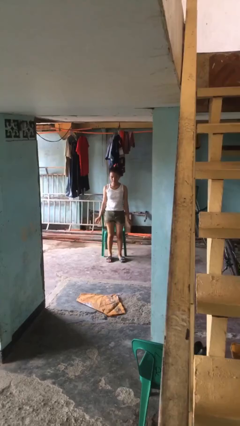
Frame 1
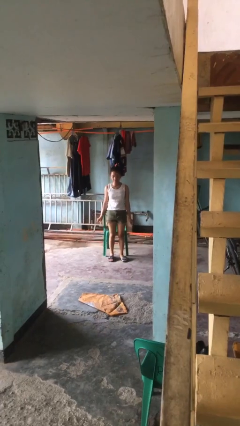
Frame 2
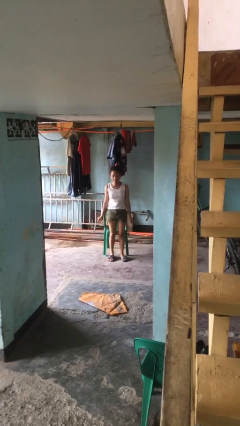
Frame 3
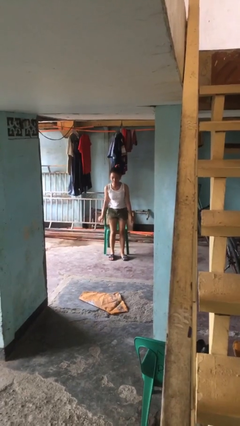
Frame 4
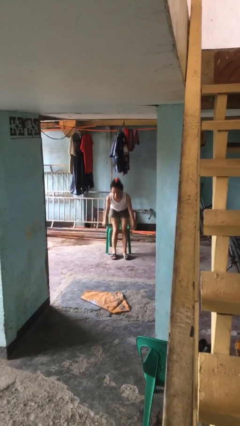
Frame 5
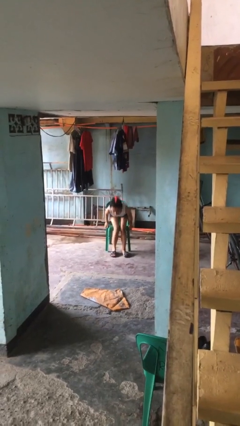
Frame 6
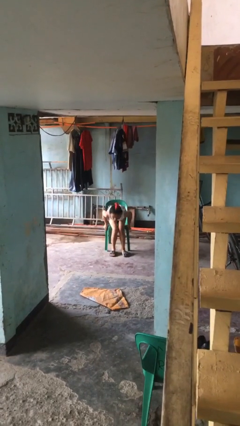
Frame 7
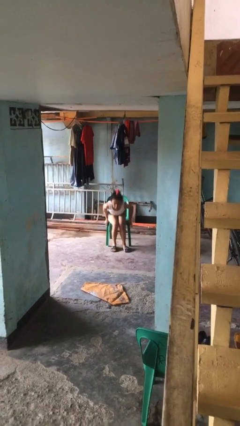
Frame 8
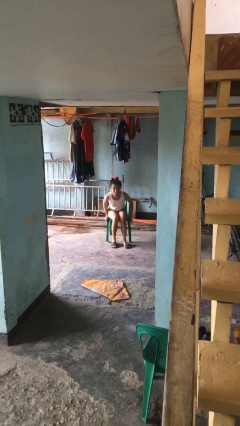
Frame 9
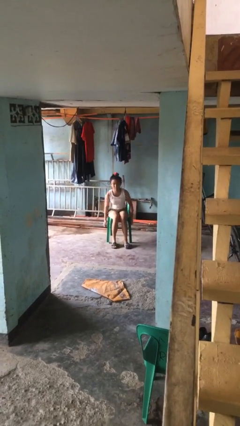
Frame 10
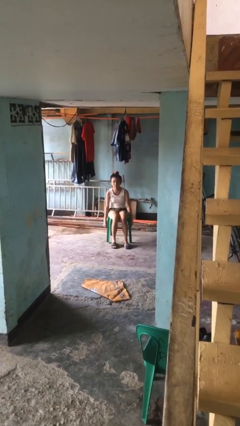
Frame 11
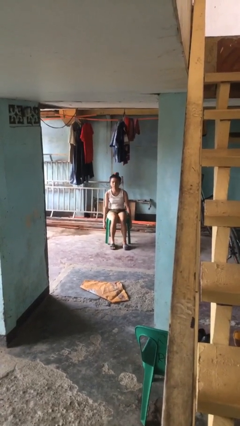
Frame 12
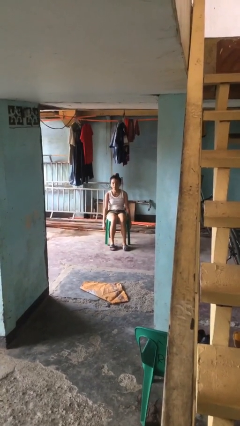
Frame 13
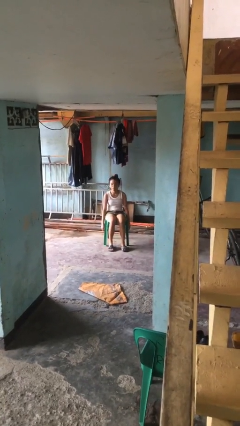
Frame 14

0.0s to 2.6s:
person sits down

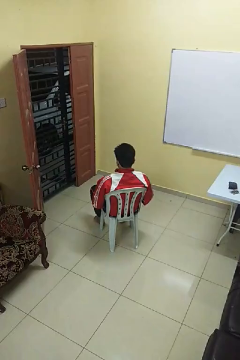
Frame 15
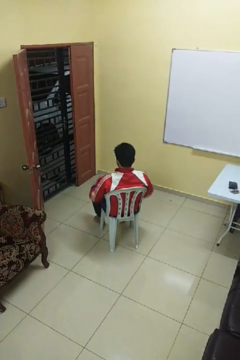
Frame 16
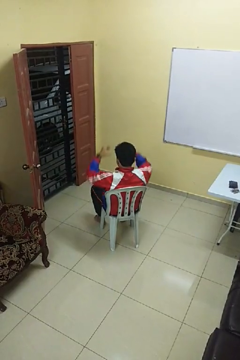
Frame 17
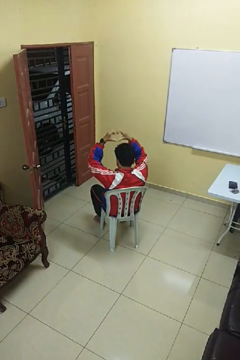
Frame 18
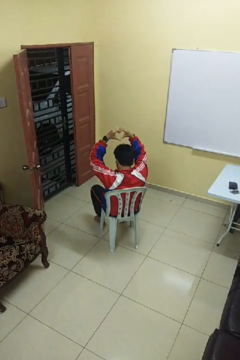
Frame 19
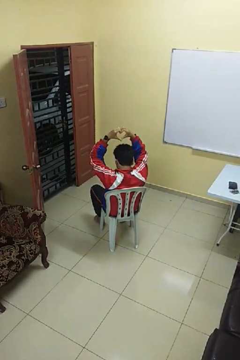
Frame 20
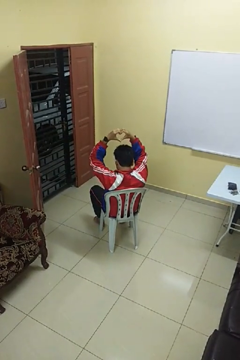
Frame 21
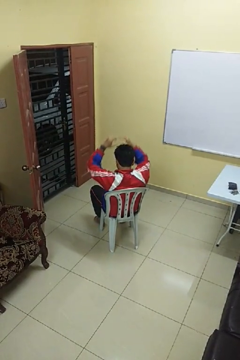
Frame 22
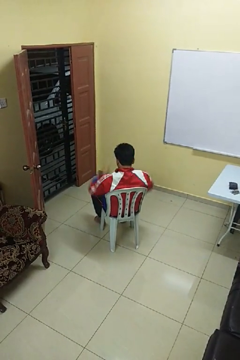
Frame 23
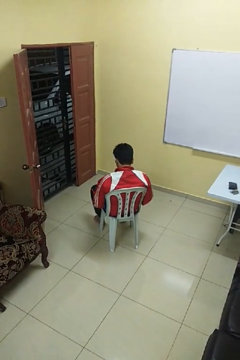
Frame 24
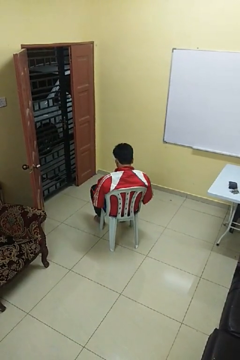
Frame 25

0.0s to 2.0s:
person gestures heart

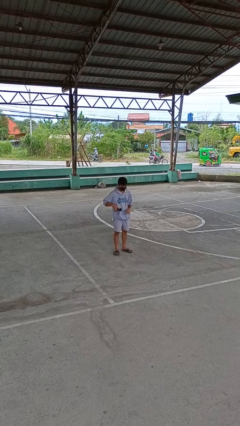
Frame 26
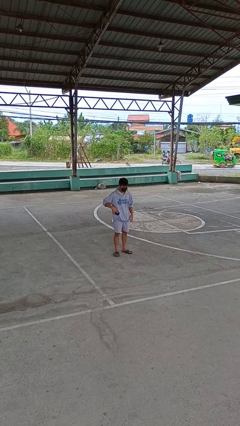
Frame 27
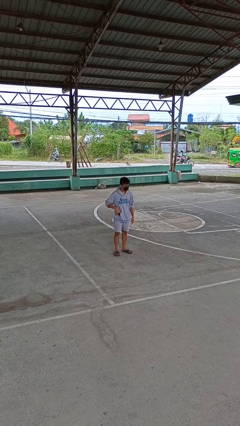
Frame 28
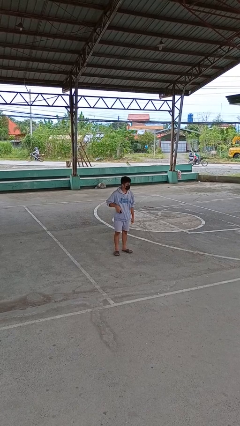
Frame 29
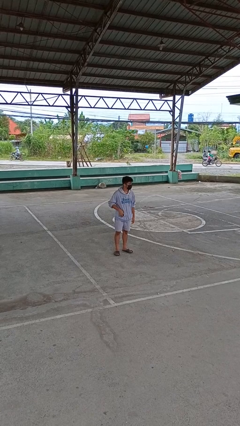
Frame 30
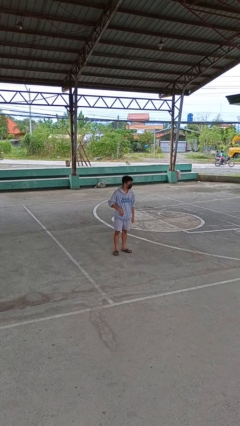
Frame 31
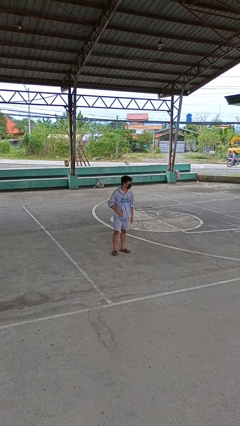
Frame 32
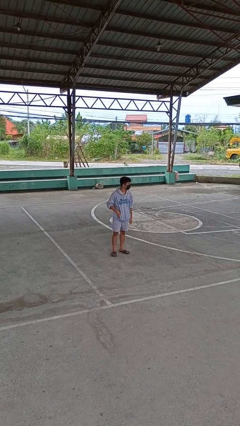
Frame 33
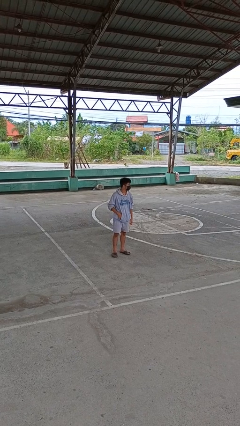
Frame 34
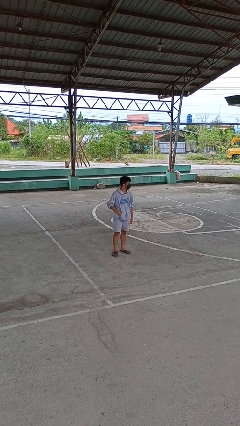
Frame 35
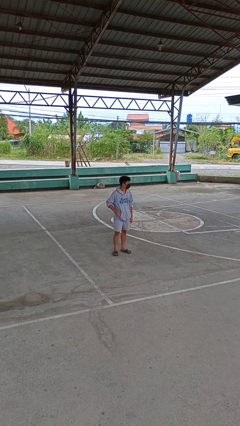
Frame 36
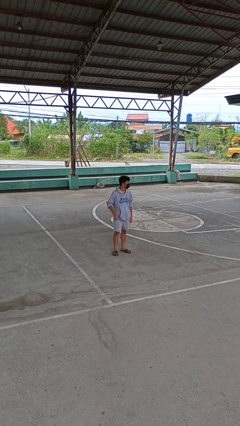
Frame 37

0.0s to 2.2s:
person puts phone into pocket

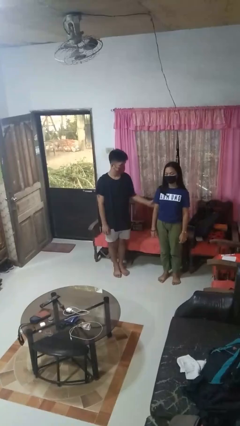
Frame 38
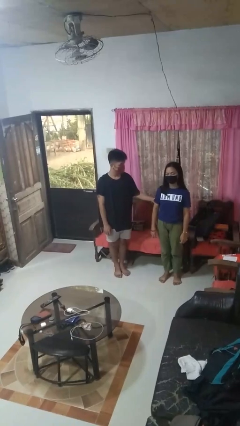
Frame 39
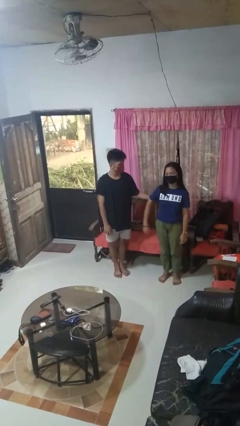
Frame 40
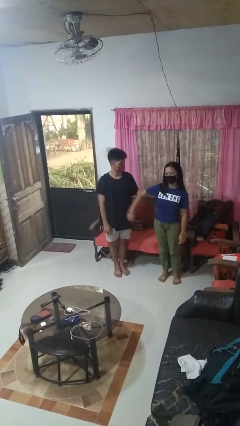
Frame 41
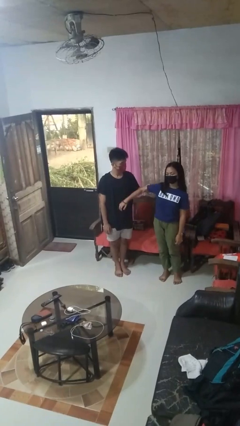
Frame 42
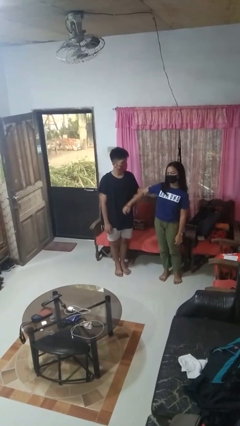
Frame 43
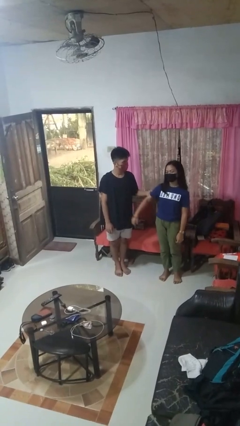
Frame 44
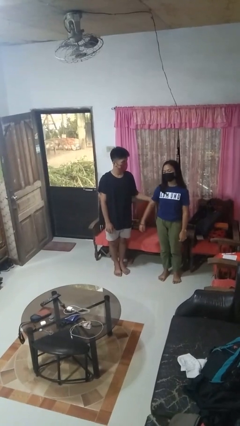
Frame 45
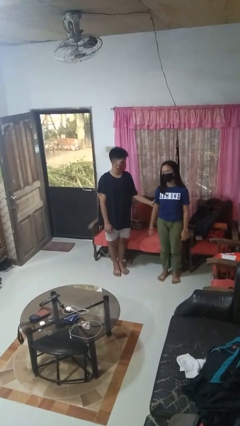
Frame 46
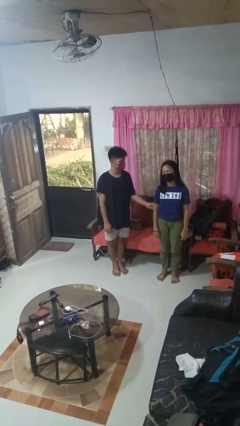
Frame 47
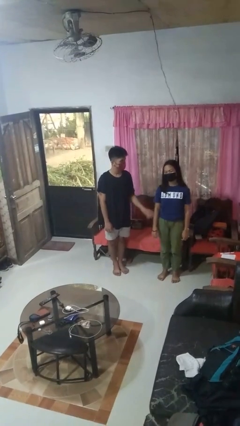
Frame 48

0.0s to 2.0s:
person grabs person by bicep

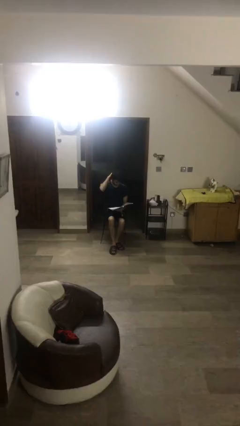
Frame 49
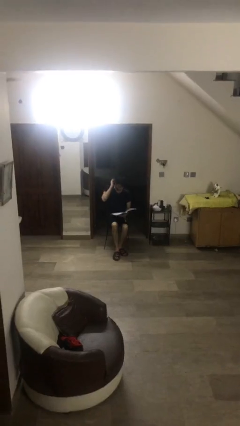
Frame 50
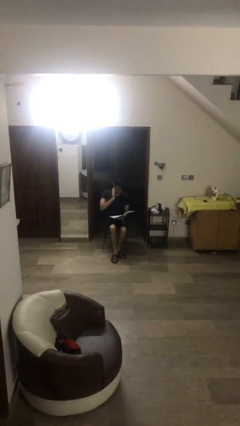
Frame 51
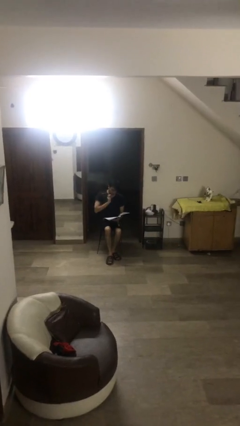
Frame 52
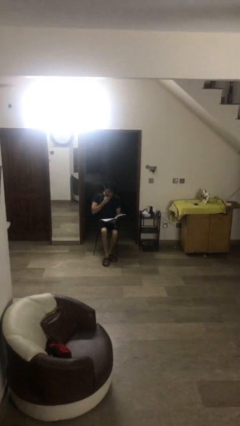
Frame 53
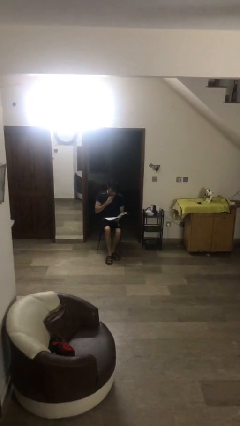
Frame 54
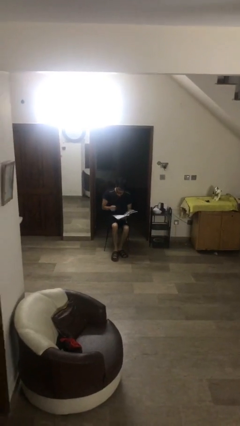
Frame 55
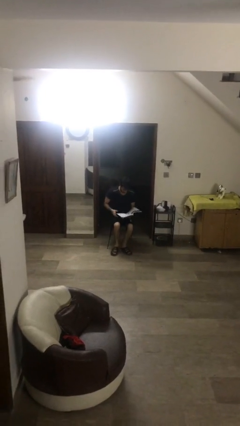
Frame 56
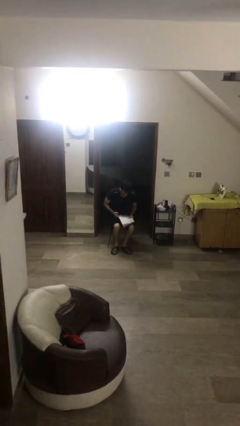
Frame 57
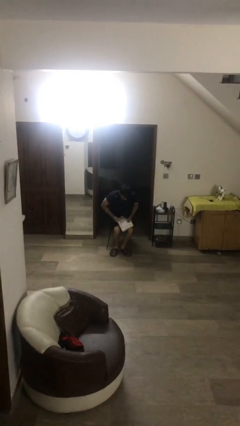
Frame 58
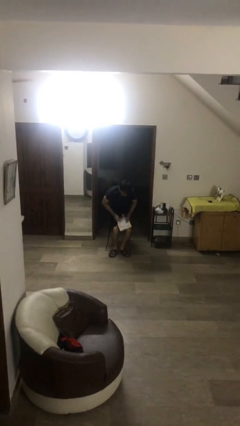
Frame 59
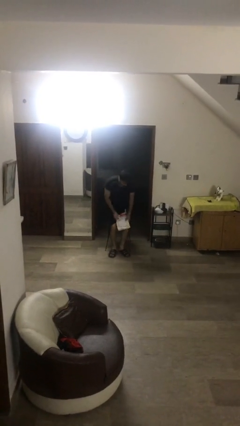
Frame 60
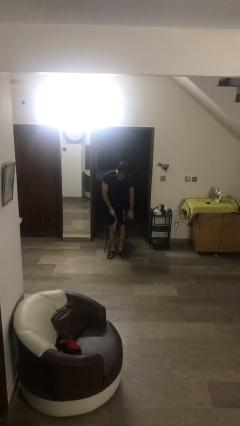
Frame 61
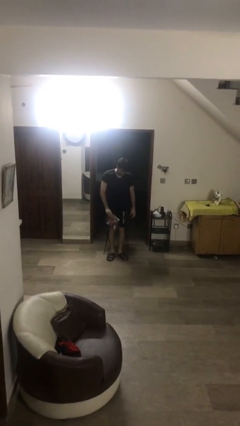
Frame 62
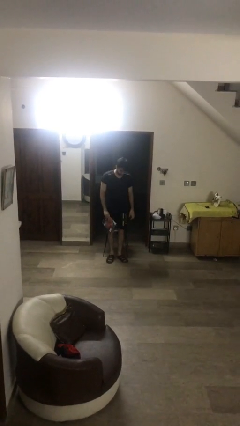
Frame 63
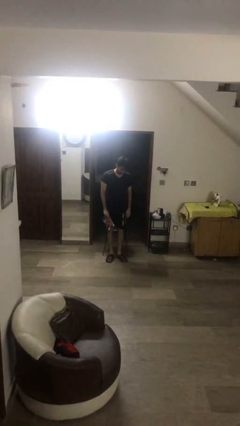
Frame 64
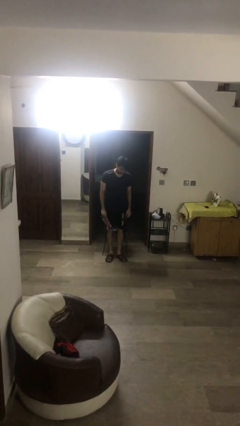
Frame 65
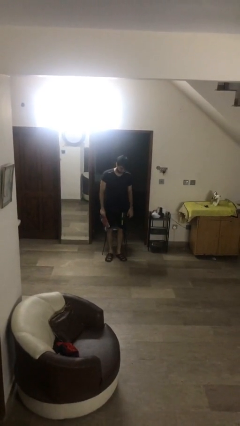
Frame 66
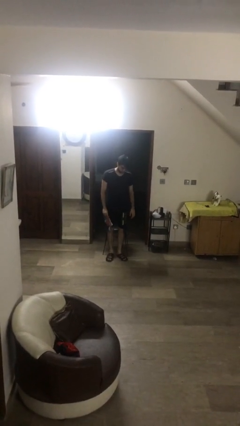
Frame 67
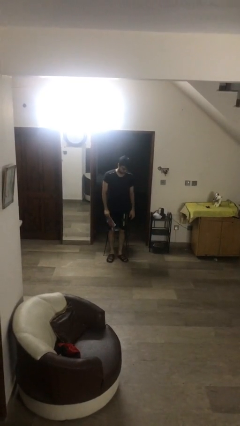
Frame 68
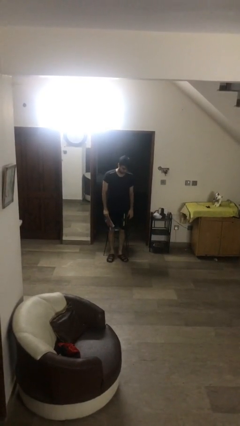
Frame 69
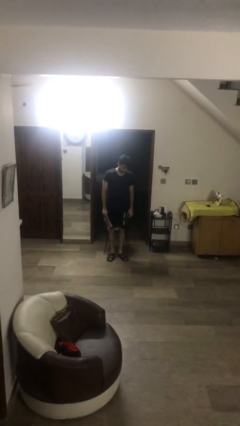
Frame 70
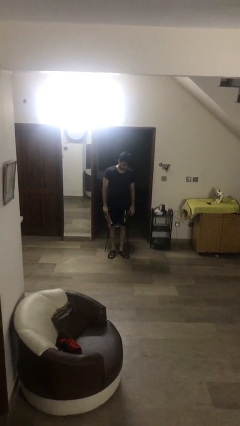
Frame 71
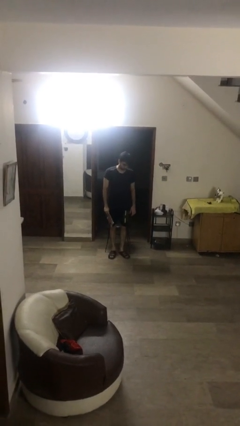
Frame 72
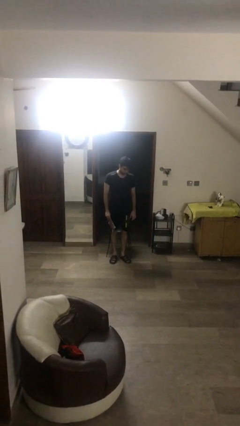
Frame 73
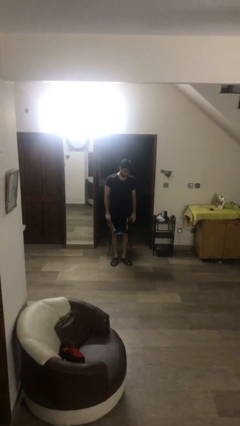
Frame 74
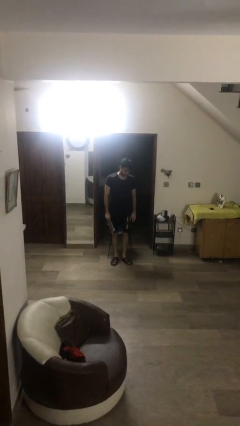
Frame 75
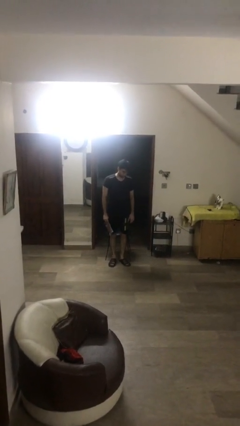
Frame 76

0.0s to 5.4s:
person stands up

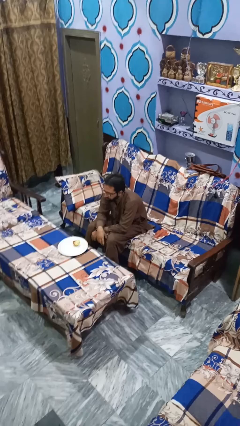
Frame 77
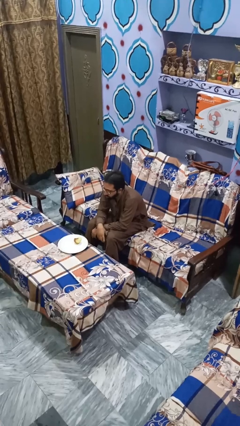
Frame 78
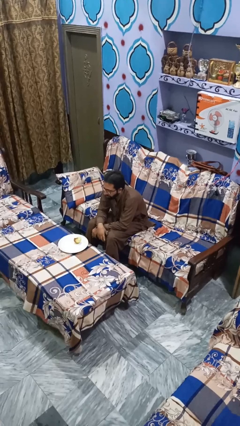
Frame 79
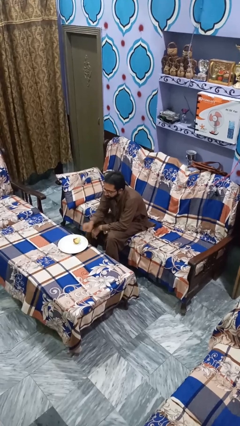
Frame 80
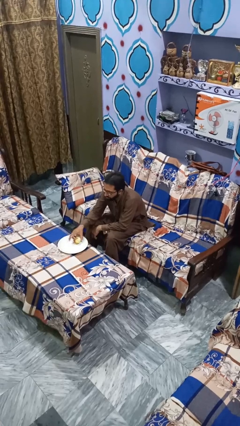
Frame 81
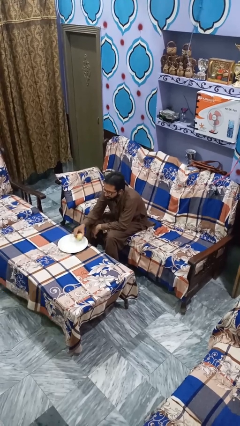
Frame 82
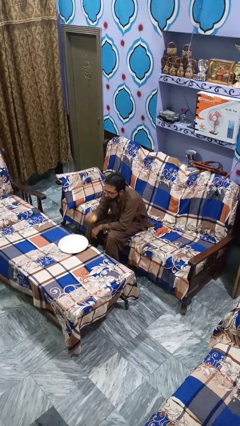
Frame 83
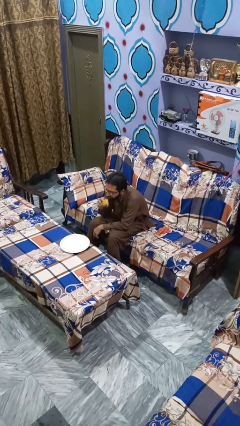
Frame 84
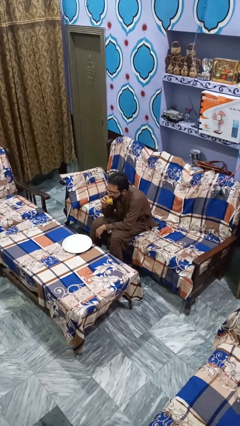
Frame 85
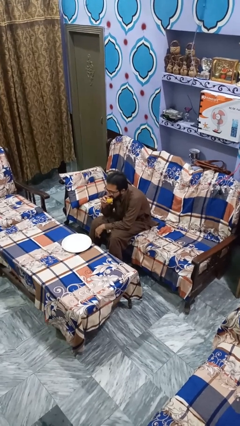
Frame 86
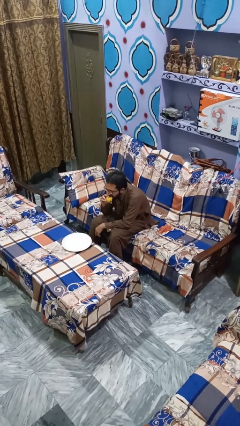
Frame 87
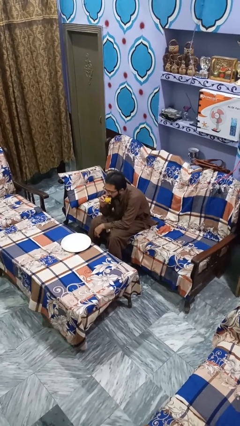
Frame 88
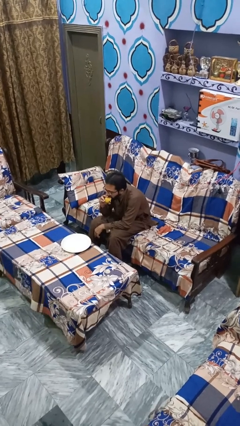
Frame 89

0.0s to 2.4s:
person eats apple

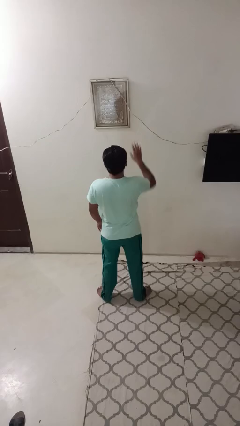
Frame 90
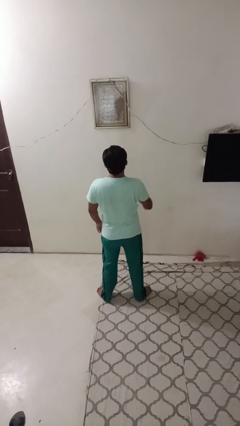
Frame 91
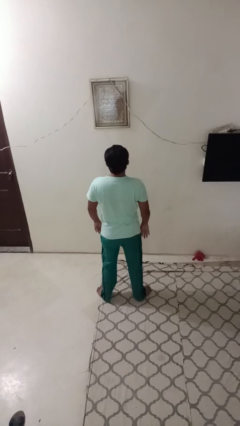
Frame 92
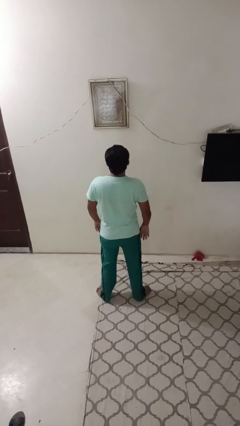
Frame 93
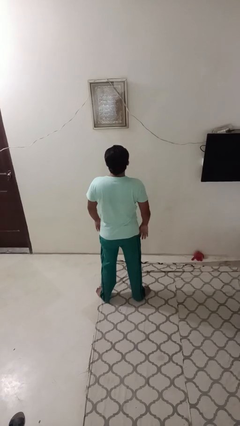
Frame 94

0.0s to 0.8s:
person gestures lower hand
